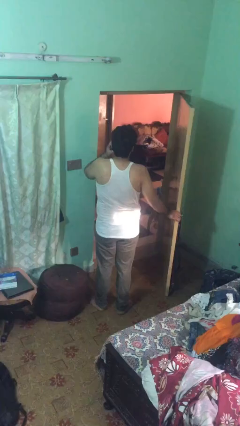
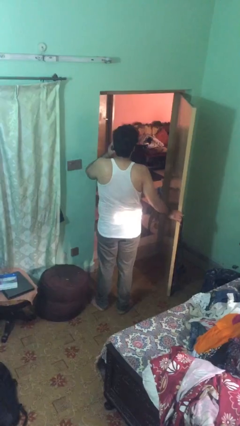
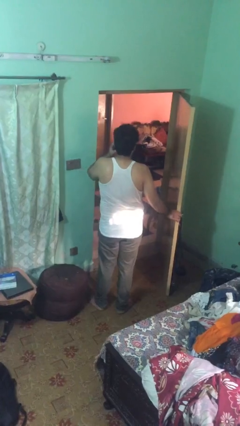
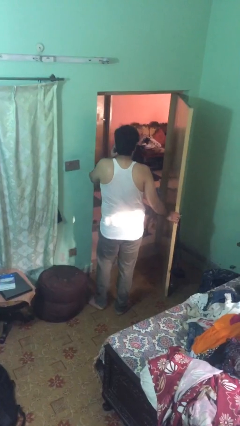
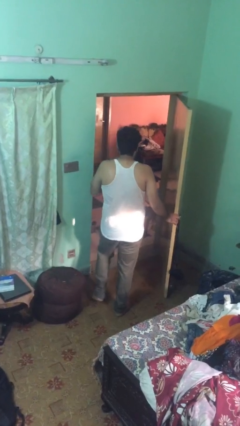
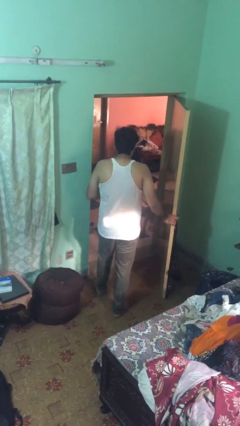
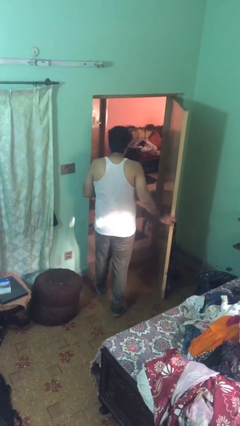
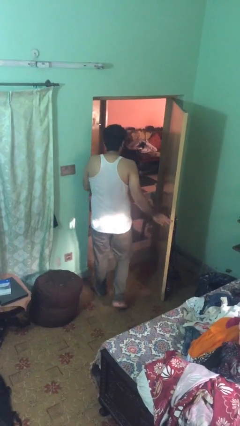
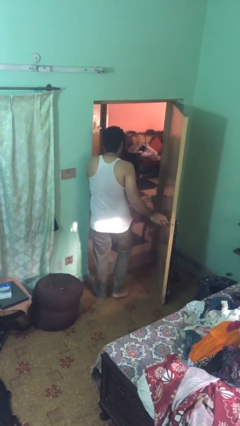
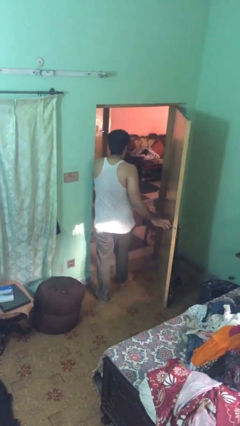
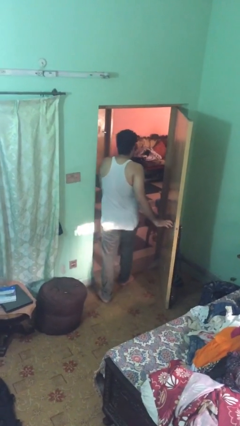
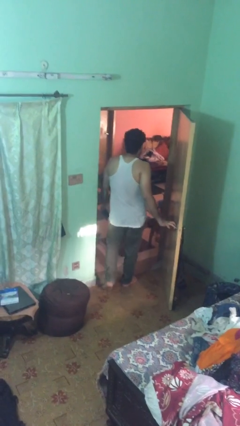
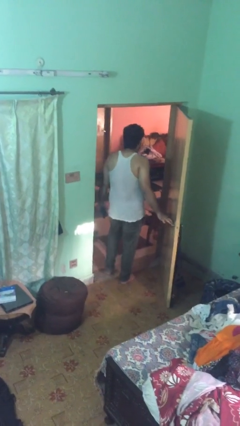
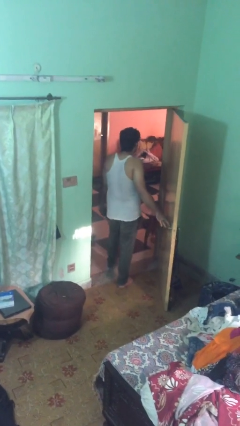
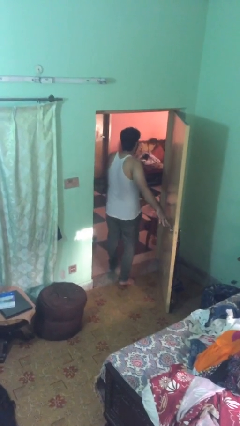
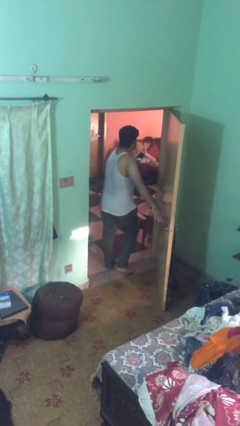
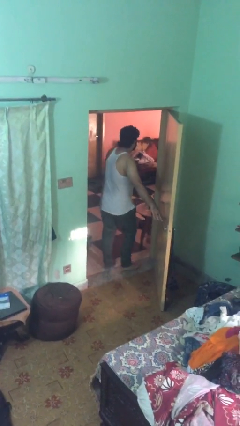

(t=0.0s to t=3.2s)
person exits scene through structure

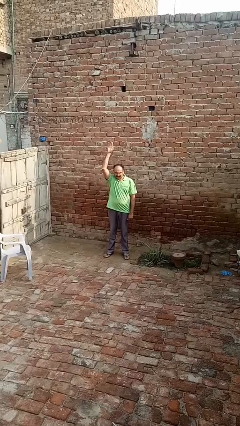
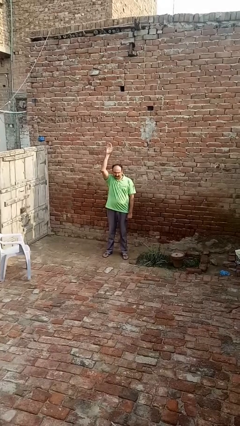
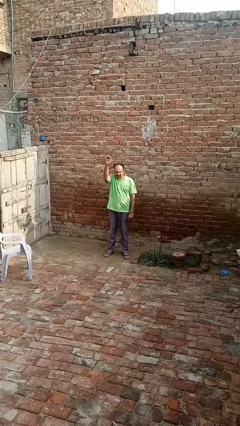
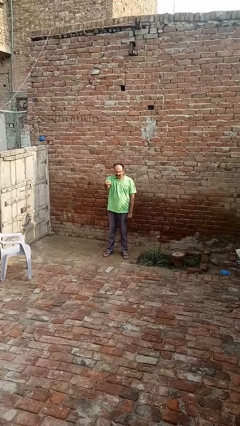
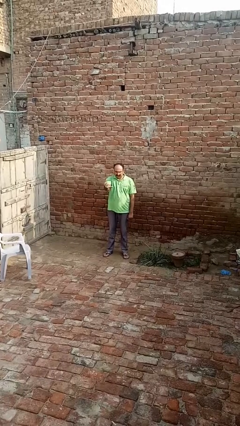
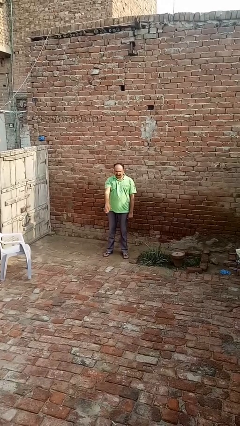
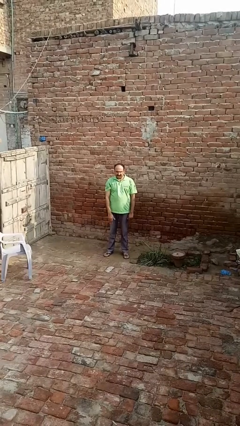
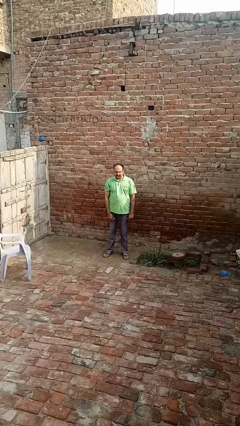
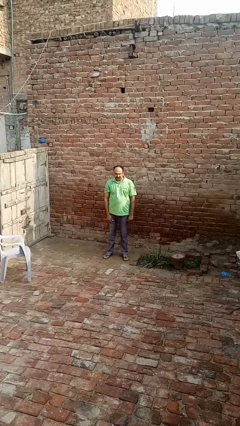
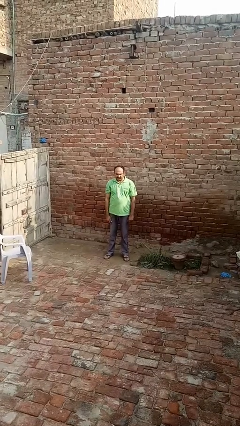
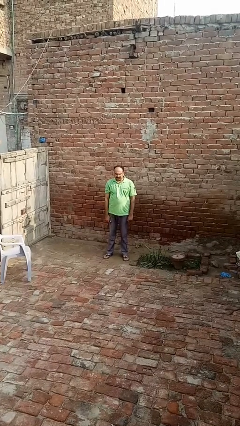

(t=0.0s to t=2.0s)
person gestures swipe down

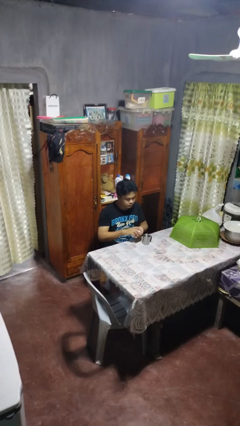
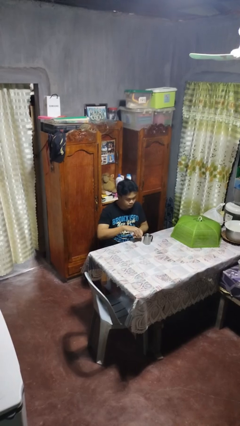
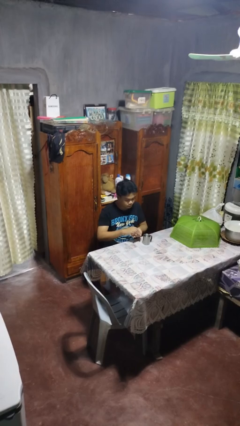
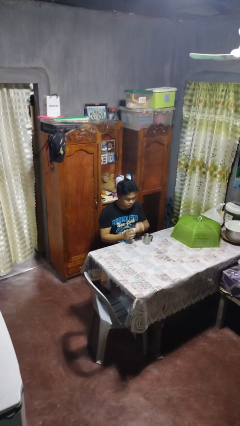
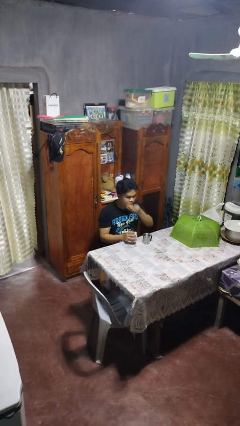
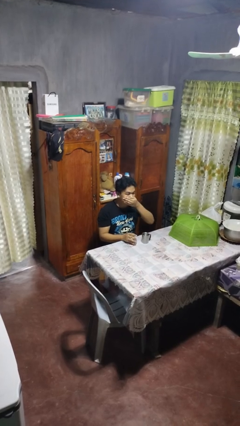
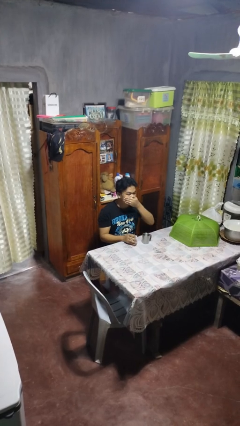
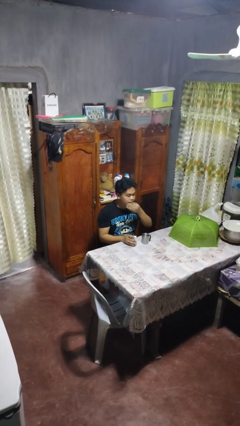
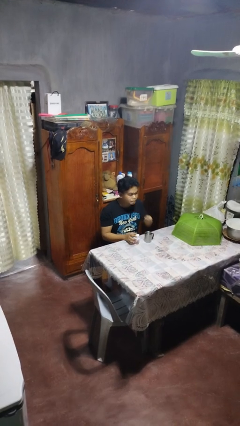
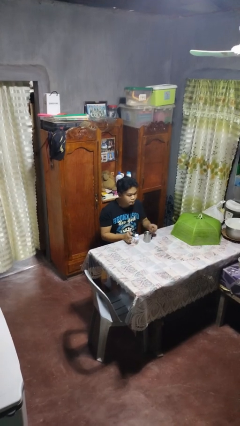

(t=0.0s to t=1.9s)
person takes medicine pills

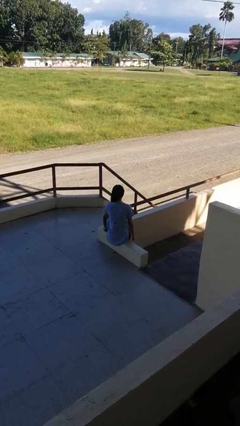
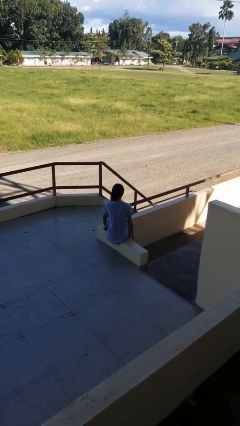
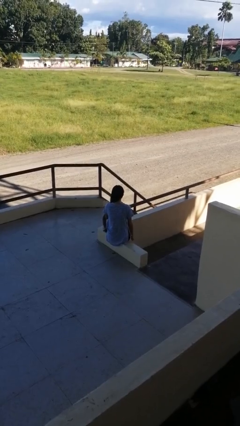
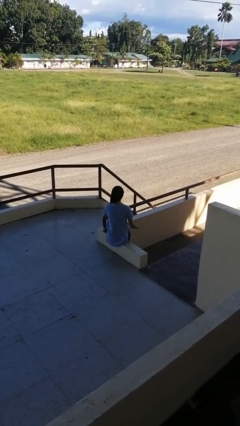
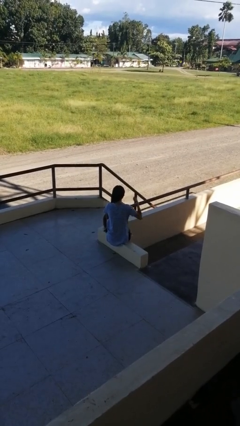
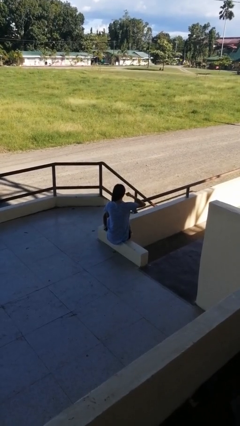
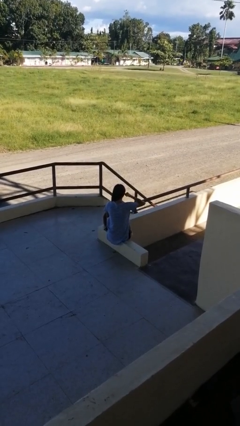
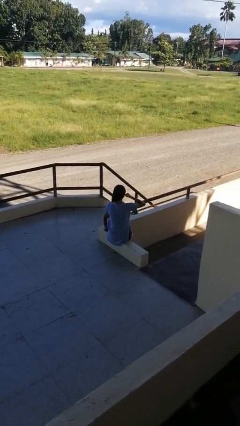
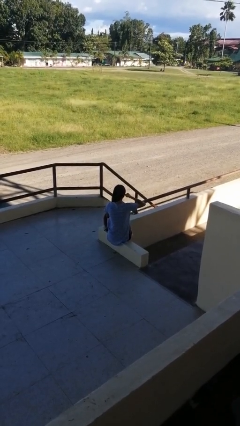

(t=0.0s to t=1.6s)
person gestures call me

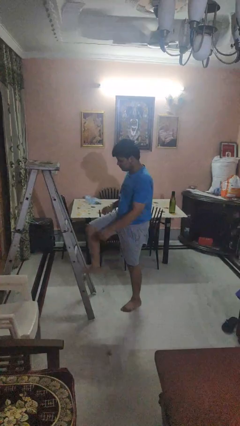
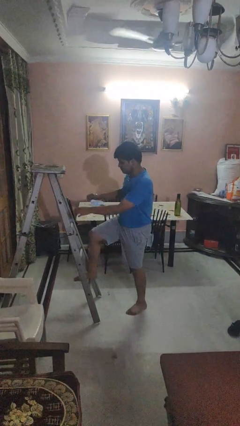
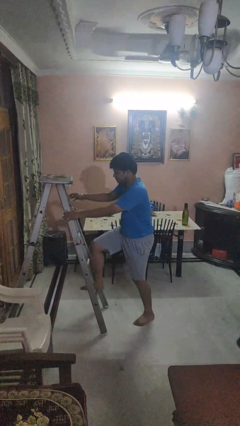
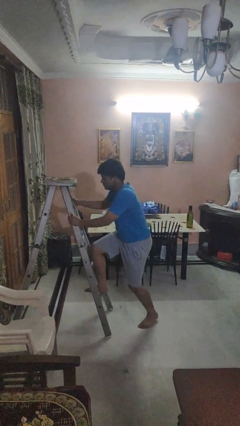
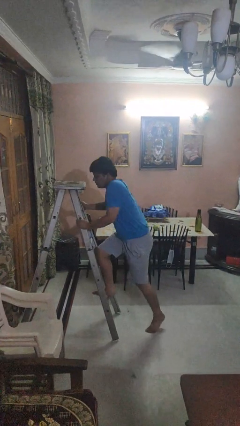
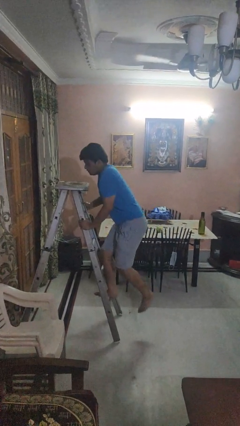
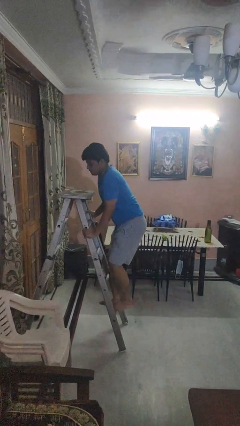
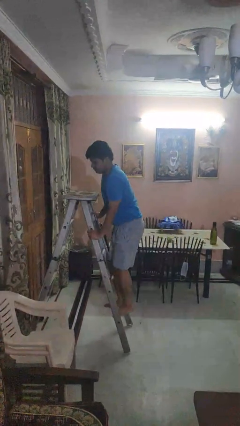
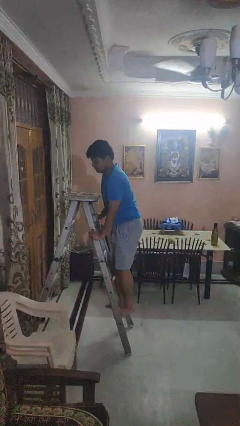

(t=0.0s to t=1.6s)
person climbs up ladder

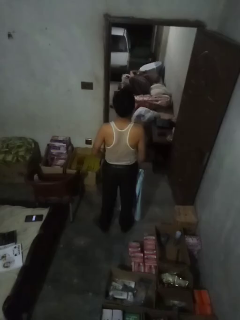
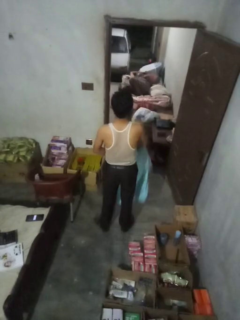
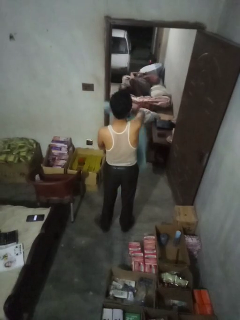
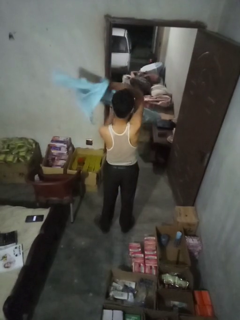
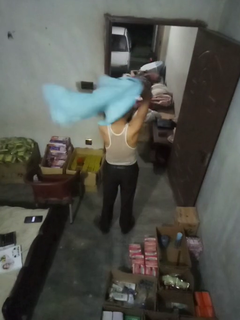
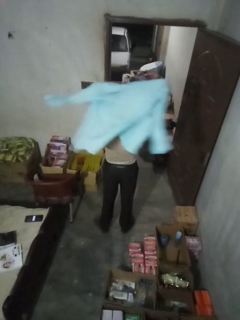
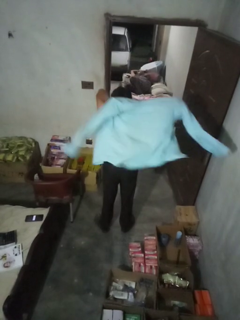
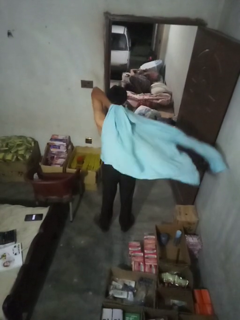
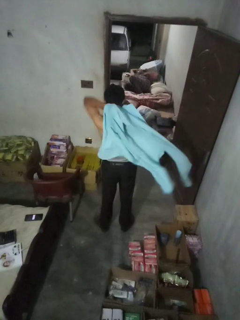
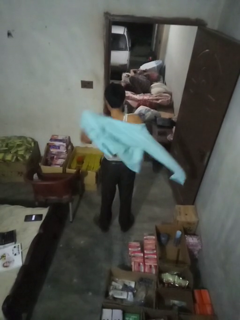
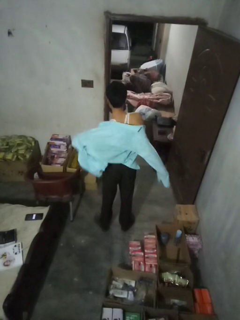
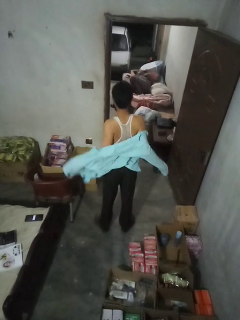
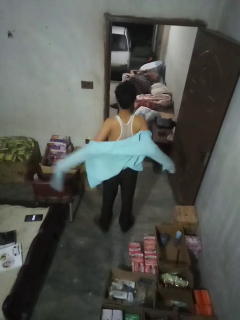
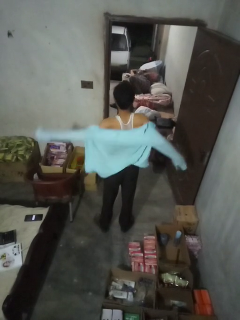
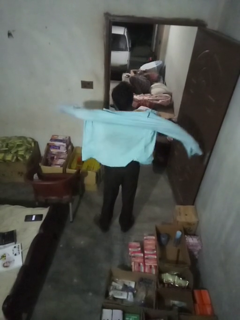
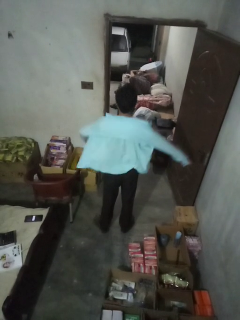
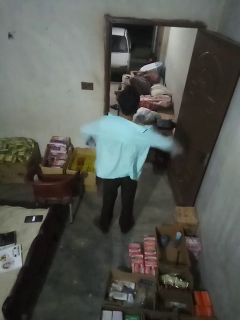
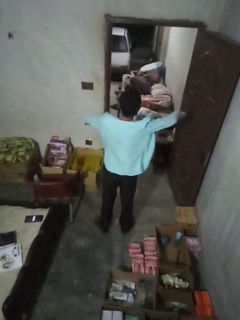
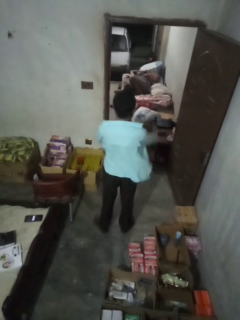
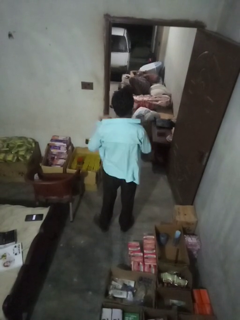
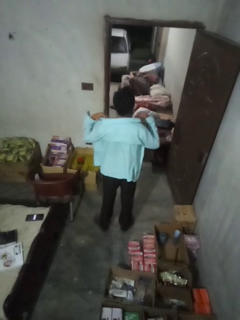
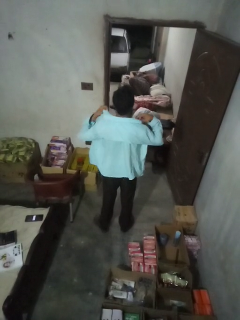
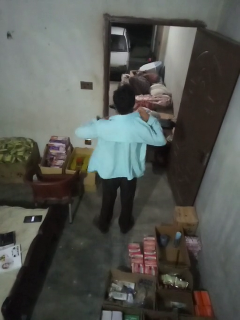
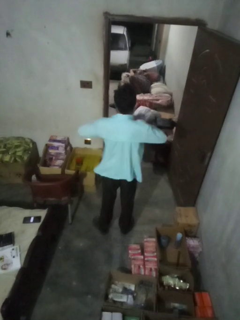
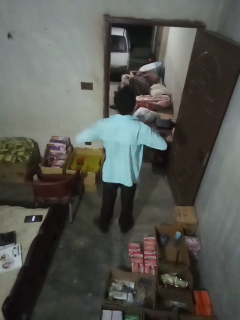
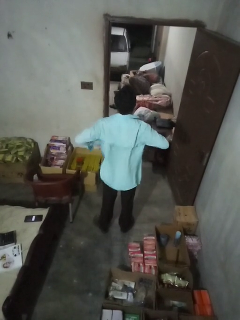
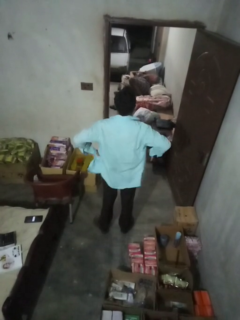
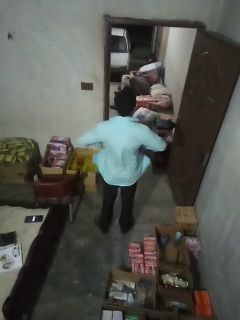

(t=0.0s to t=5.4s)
person puts on shirt

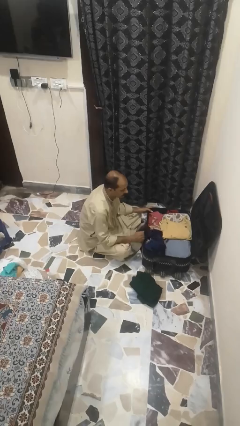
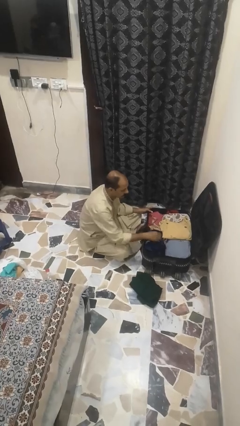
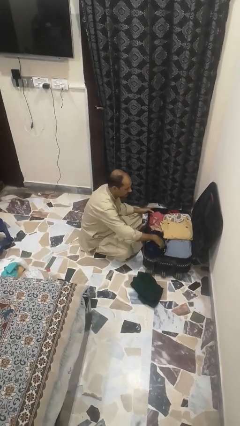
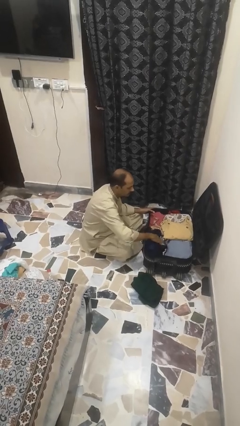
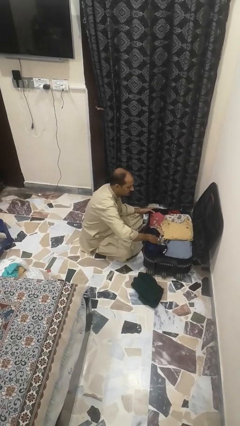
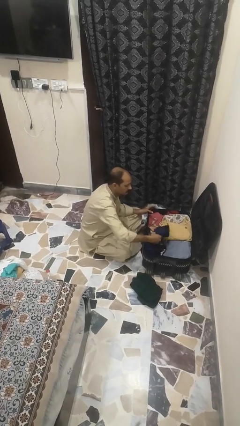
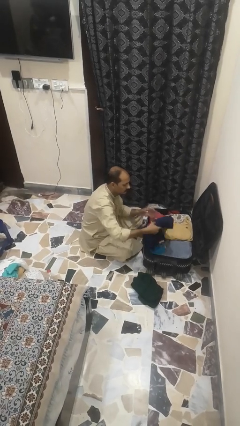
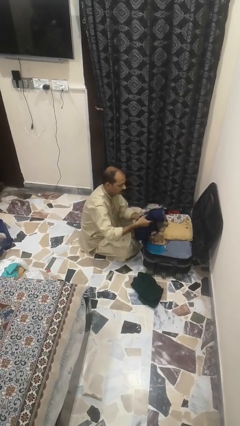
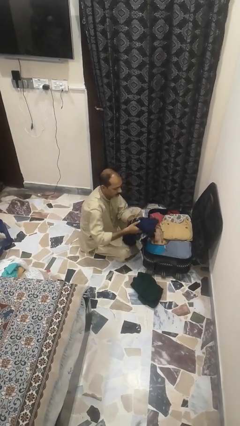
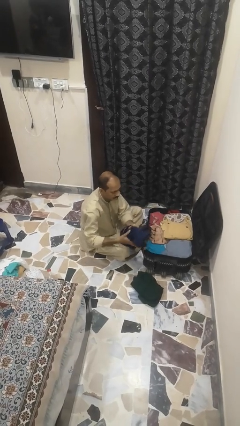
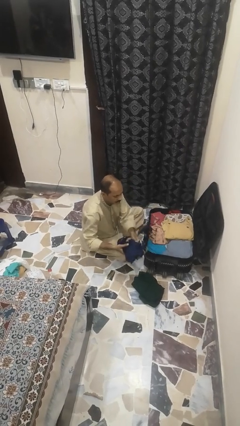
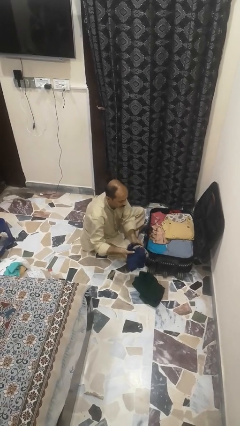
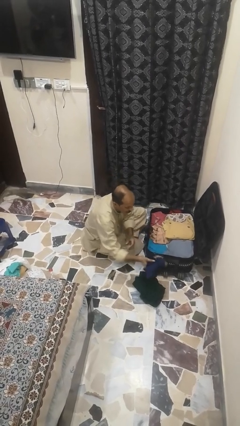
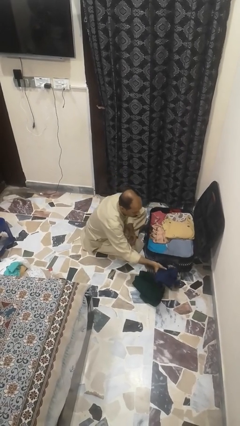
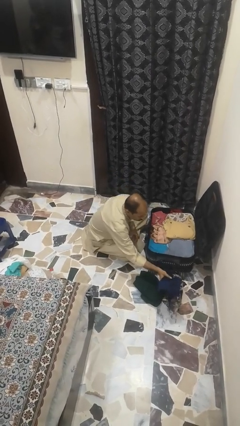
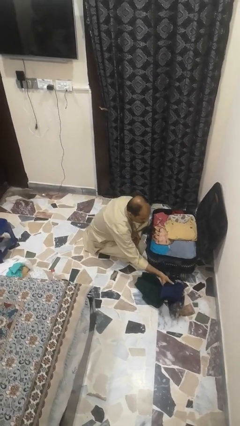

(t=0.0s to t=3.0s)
person unloads clothes from suitcase
